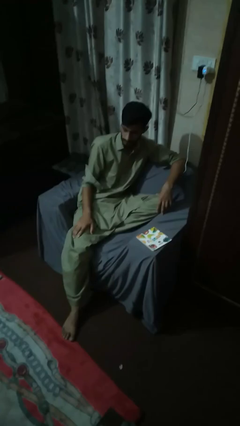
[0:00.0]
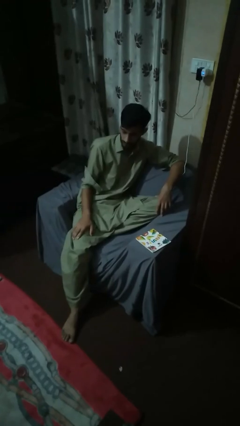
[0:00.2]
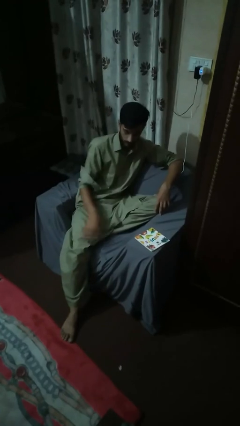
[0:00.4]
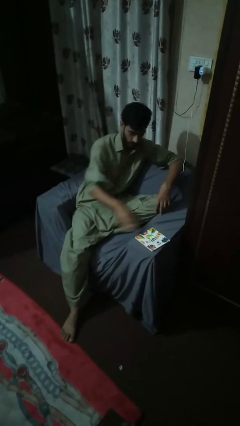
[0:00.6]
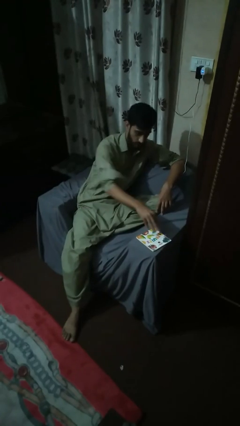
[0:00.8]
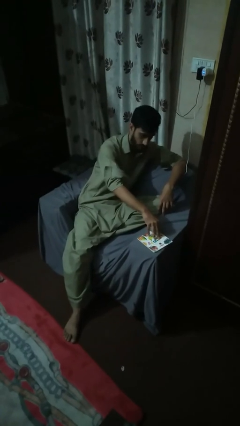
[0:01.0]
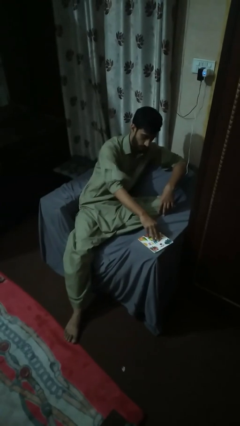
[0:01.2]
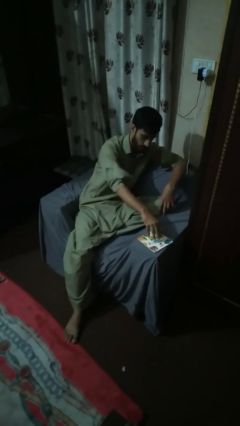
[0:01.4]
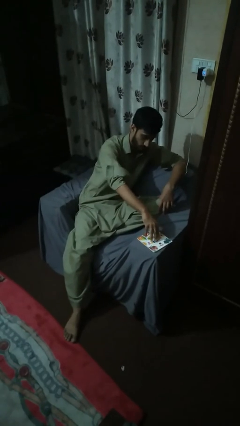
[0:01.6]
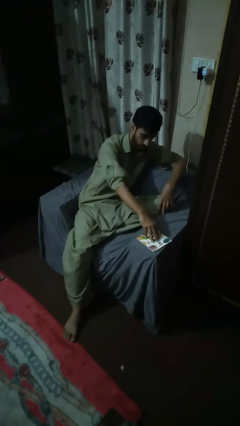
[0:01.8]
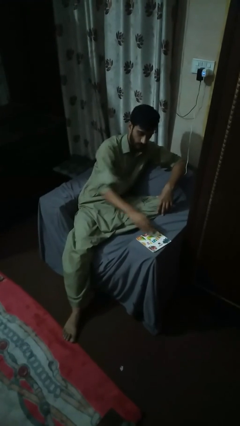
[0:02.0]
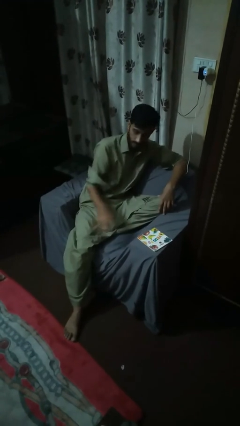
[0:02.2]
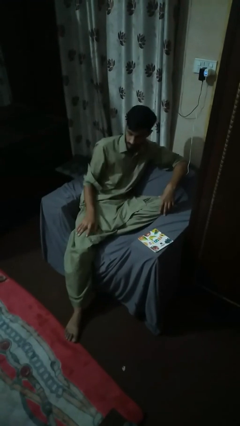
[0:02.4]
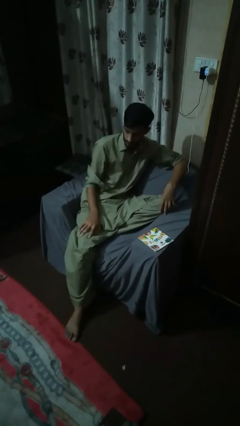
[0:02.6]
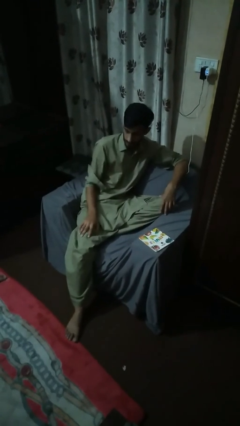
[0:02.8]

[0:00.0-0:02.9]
person taps object with finger

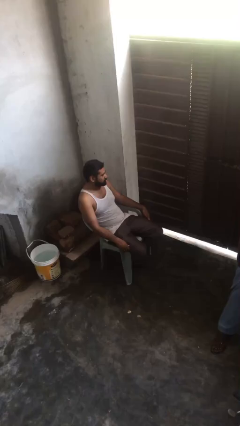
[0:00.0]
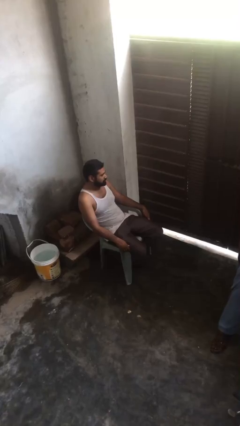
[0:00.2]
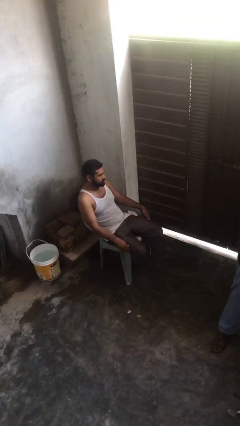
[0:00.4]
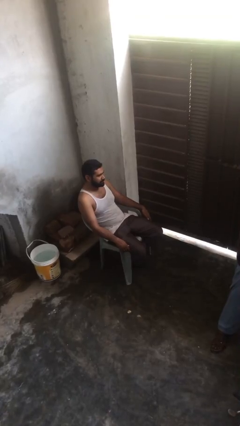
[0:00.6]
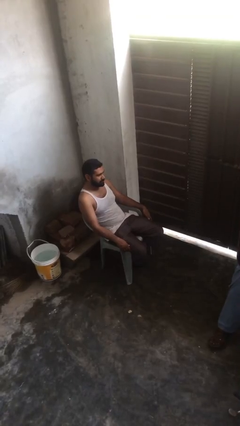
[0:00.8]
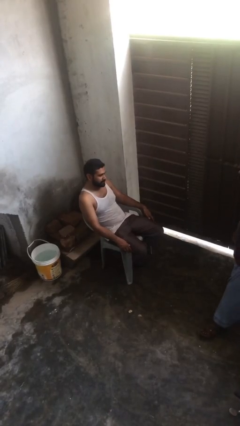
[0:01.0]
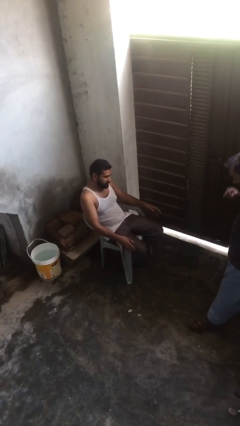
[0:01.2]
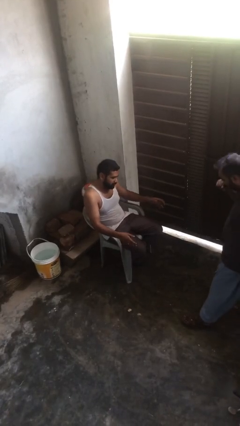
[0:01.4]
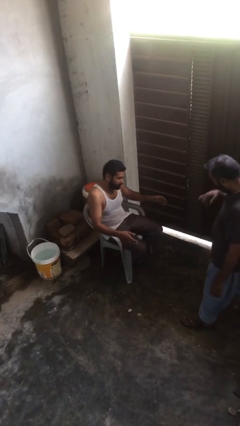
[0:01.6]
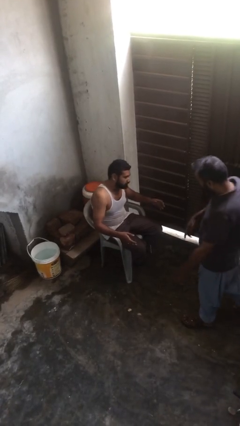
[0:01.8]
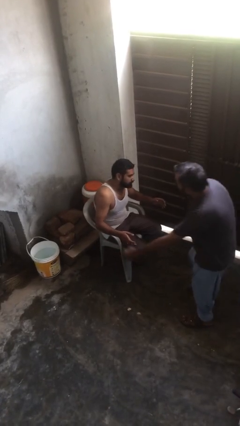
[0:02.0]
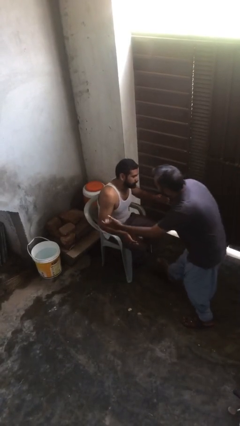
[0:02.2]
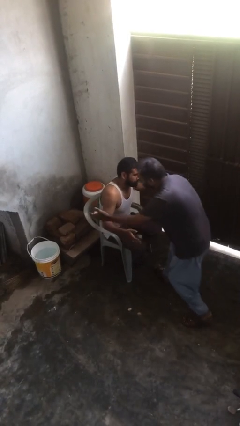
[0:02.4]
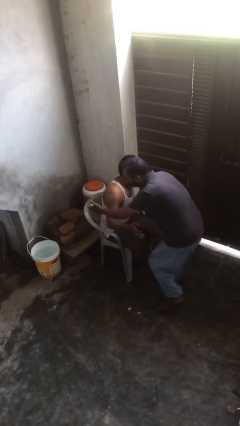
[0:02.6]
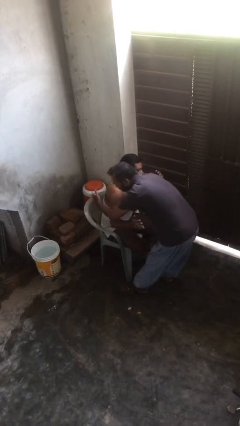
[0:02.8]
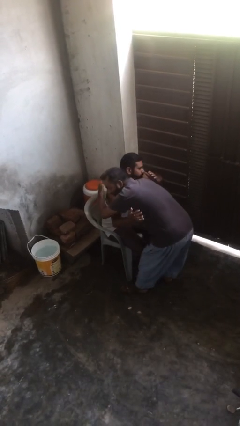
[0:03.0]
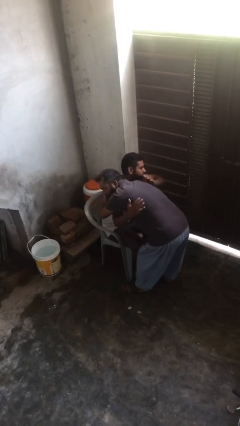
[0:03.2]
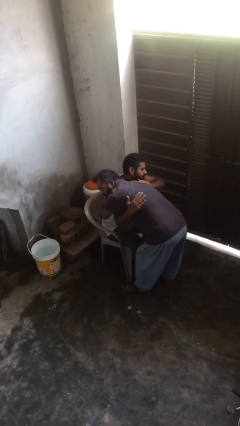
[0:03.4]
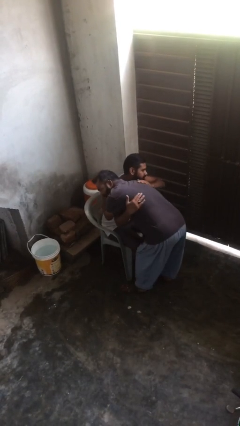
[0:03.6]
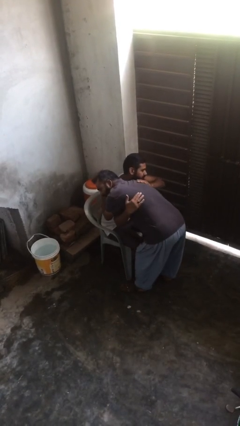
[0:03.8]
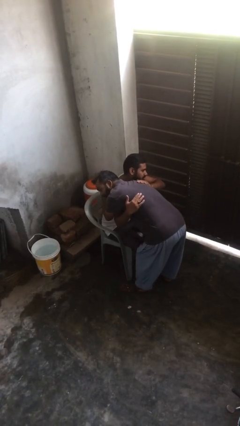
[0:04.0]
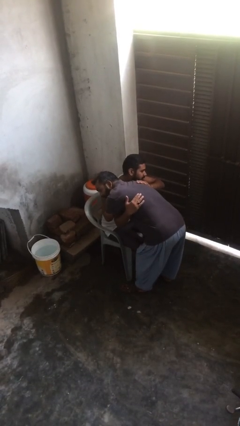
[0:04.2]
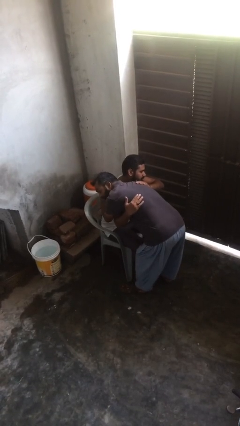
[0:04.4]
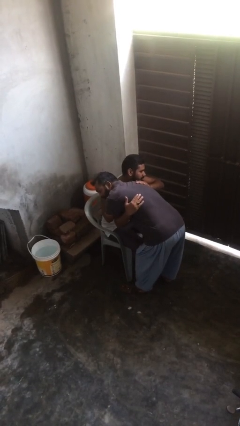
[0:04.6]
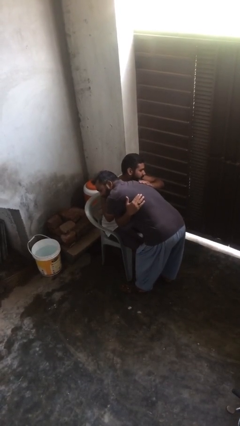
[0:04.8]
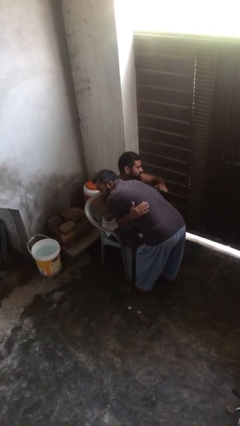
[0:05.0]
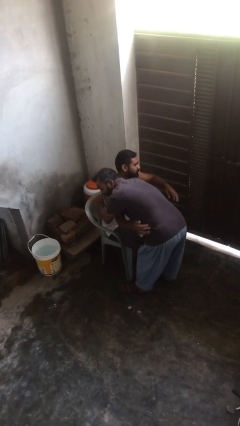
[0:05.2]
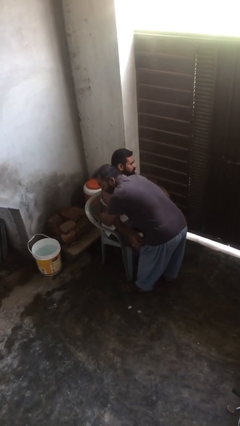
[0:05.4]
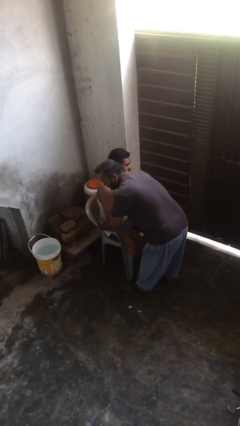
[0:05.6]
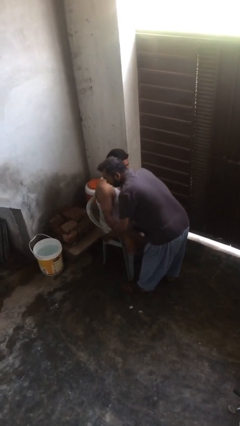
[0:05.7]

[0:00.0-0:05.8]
person embraces person

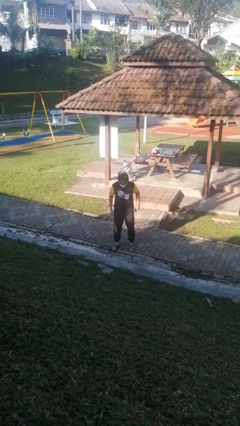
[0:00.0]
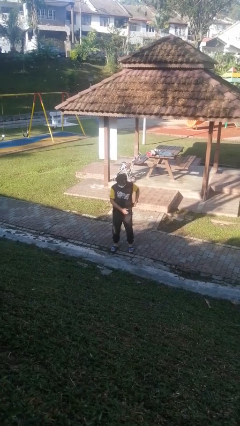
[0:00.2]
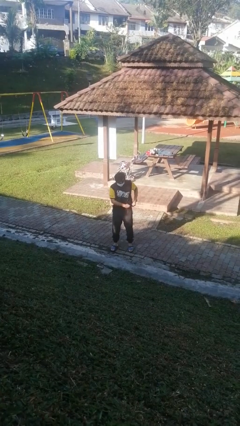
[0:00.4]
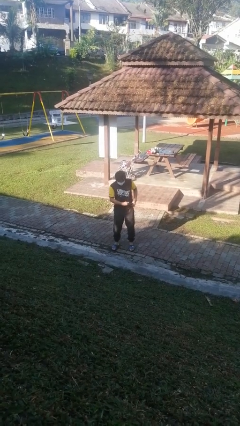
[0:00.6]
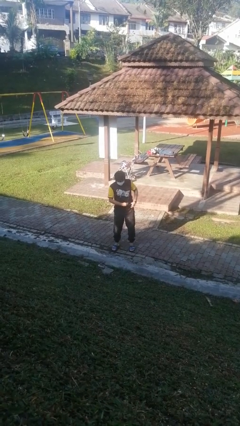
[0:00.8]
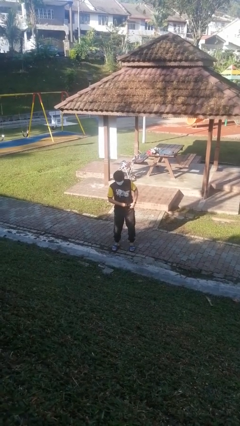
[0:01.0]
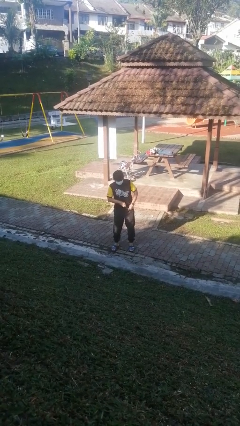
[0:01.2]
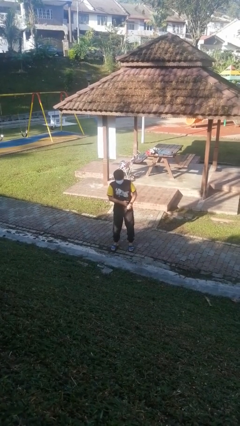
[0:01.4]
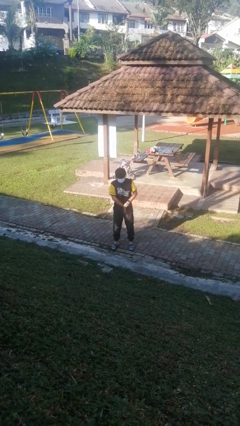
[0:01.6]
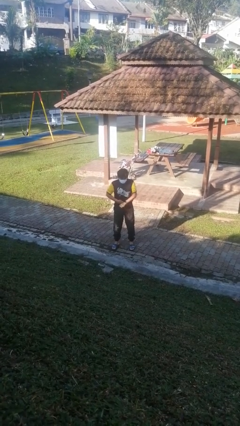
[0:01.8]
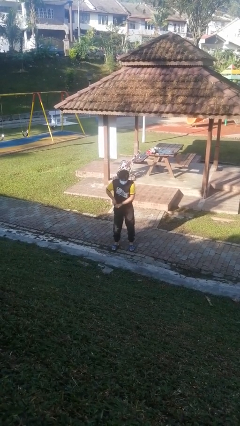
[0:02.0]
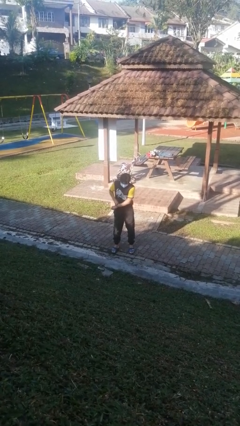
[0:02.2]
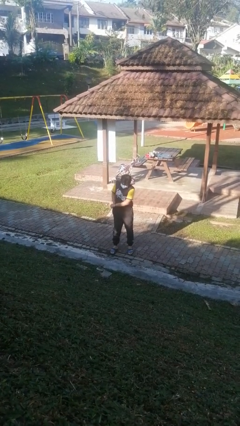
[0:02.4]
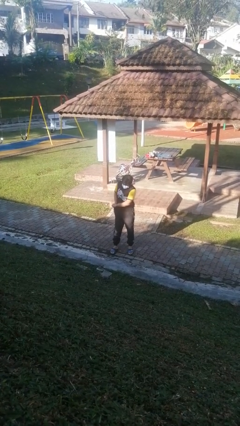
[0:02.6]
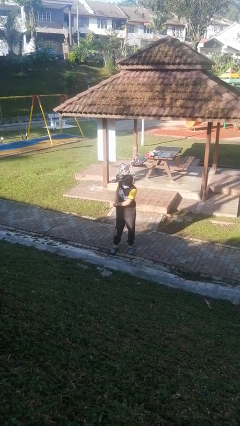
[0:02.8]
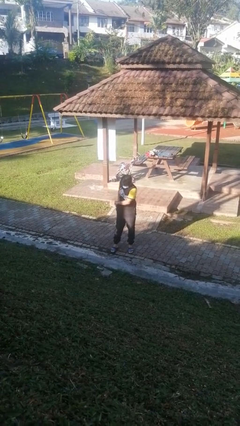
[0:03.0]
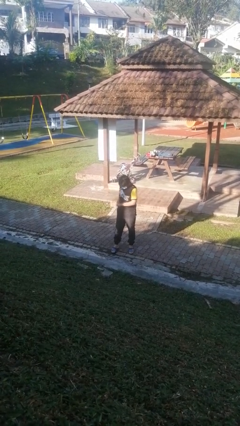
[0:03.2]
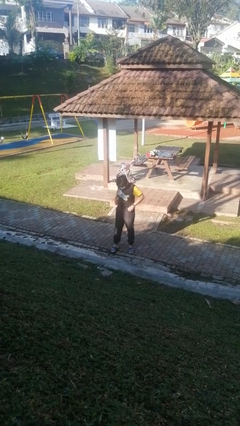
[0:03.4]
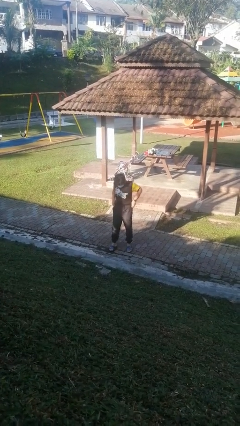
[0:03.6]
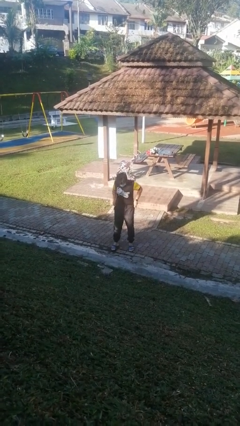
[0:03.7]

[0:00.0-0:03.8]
person tucks in shirt

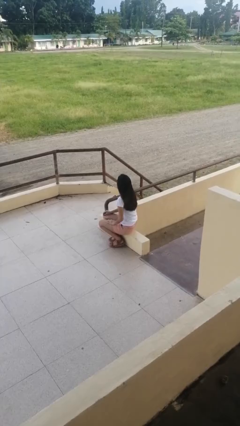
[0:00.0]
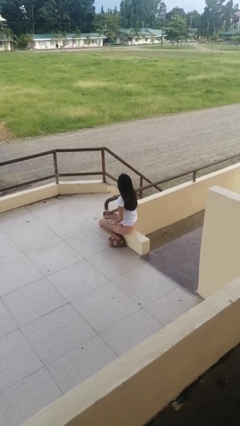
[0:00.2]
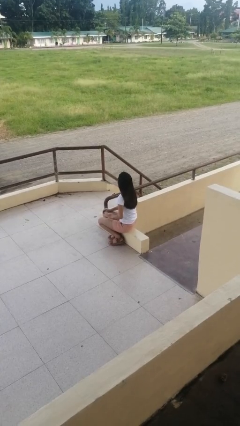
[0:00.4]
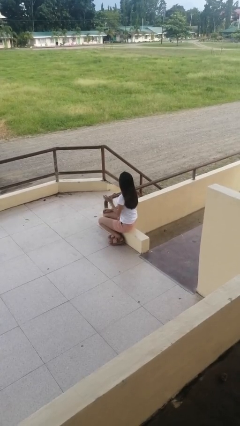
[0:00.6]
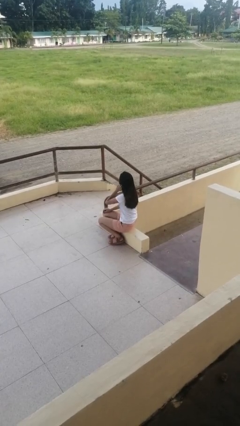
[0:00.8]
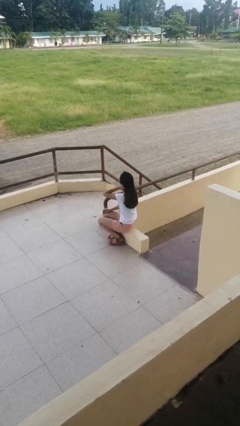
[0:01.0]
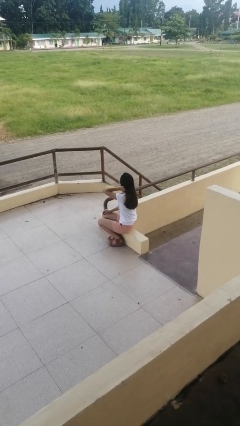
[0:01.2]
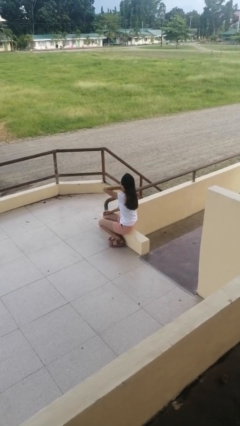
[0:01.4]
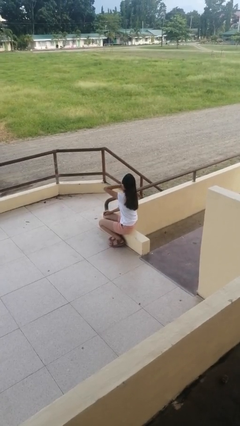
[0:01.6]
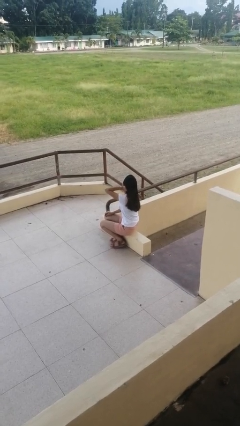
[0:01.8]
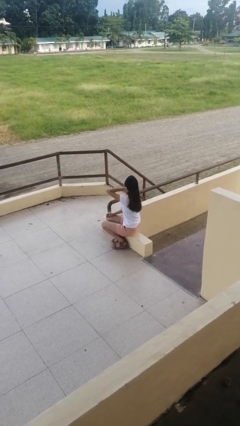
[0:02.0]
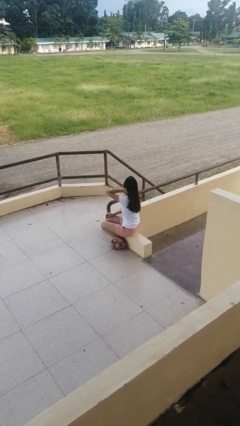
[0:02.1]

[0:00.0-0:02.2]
person rubs neck

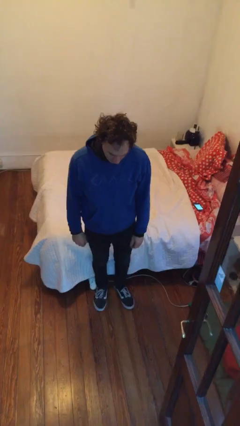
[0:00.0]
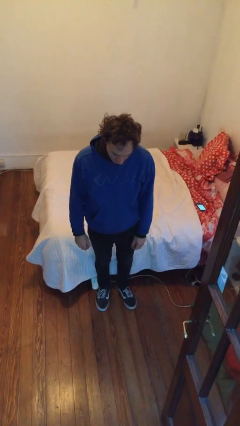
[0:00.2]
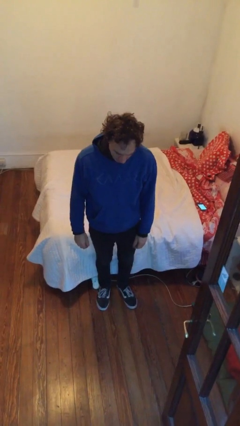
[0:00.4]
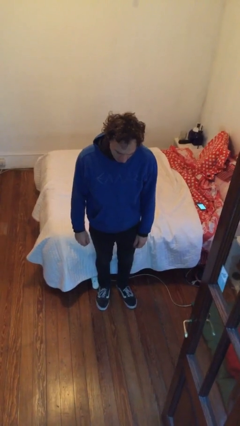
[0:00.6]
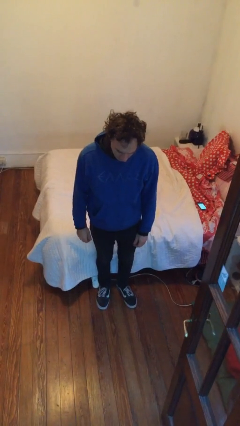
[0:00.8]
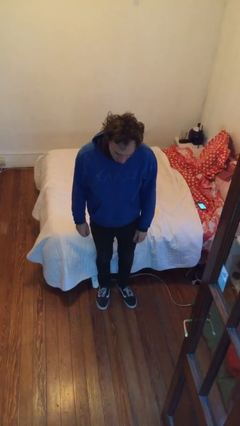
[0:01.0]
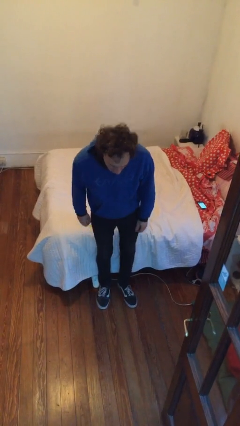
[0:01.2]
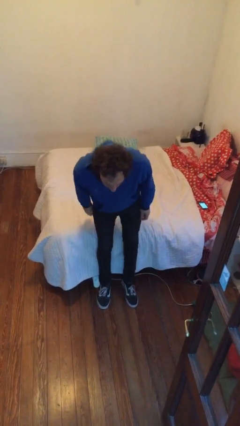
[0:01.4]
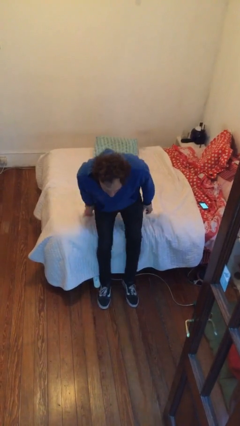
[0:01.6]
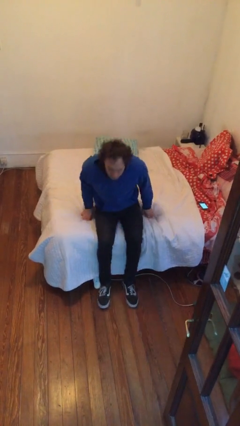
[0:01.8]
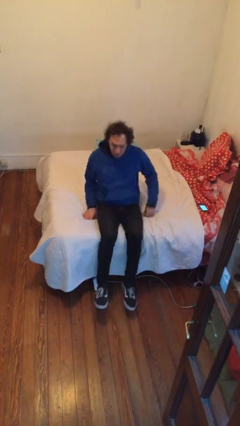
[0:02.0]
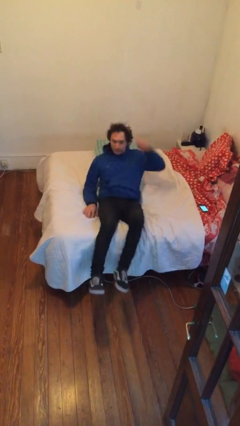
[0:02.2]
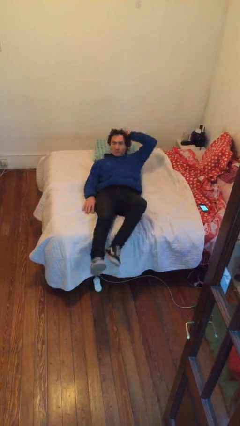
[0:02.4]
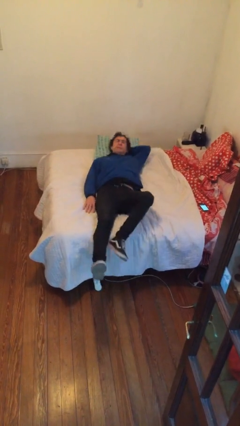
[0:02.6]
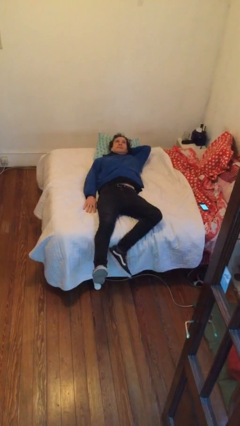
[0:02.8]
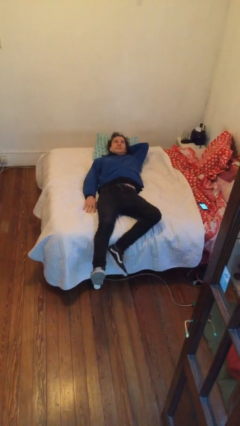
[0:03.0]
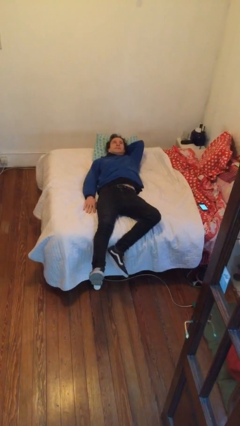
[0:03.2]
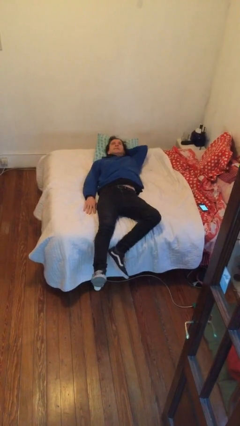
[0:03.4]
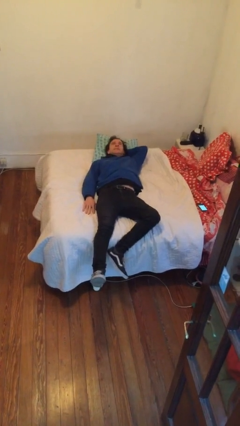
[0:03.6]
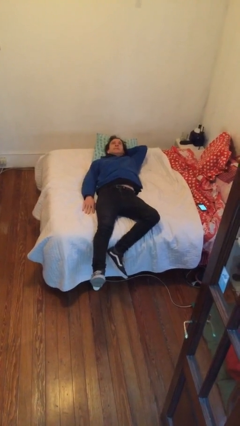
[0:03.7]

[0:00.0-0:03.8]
person lies down on bed
